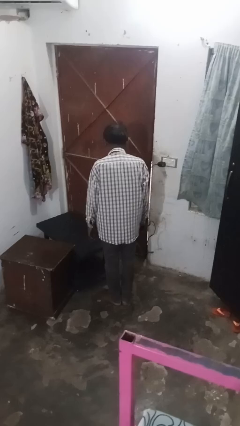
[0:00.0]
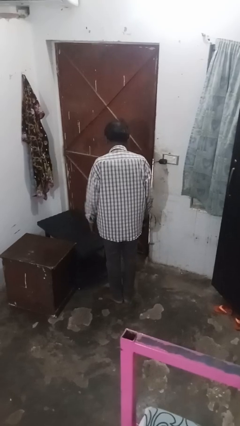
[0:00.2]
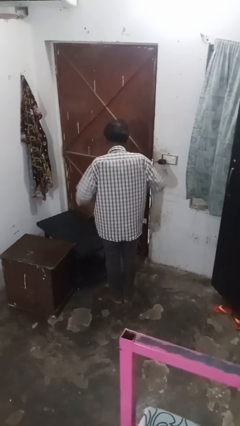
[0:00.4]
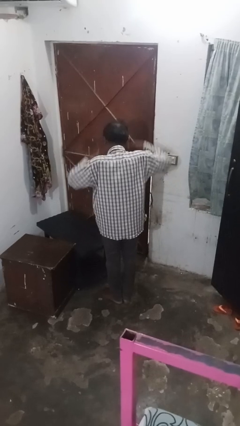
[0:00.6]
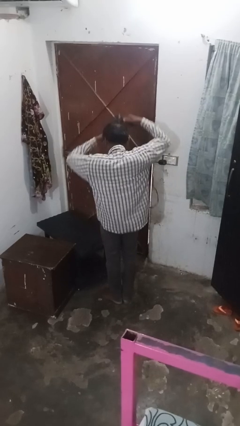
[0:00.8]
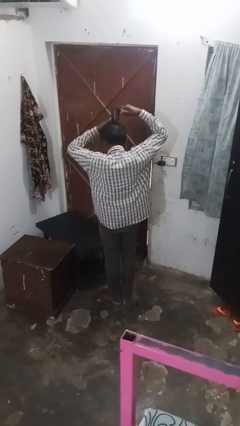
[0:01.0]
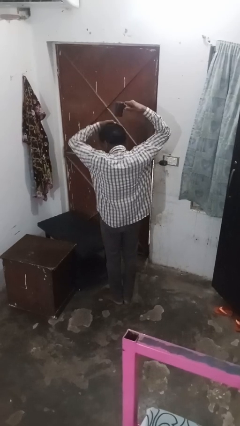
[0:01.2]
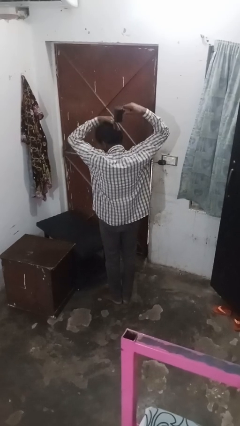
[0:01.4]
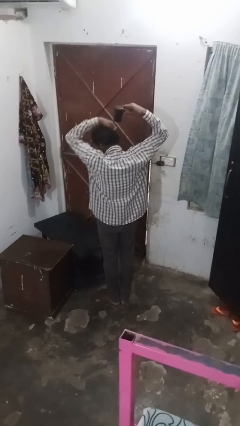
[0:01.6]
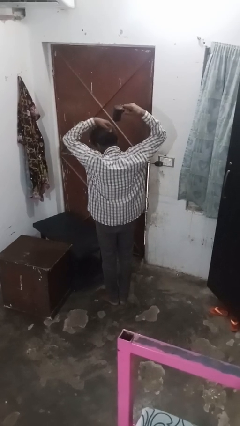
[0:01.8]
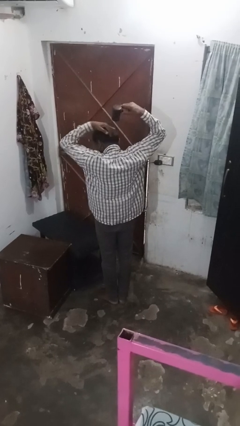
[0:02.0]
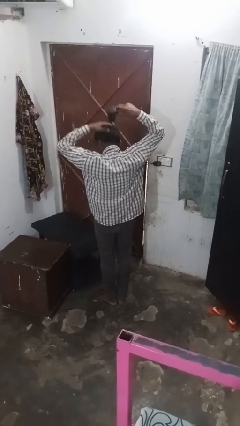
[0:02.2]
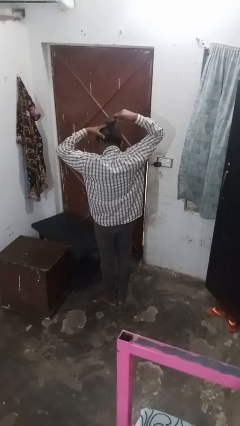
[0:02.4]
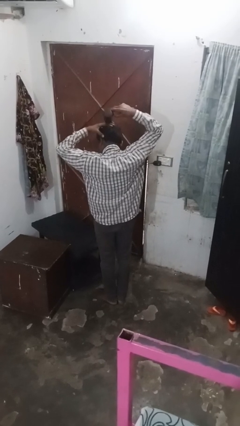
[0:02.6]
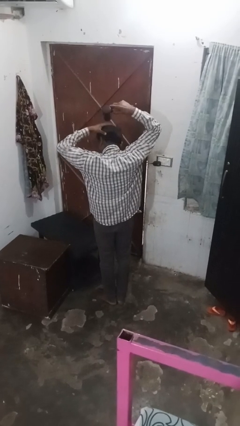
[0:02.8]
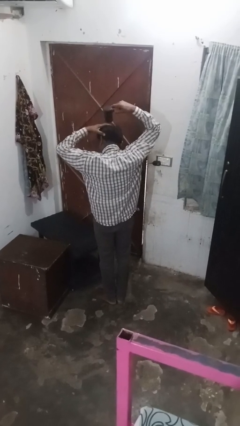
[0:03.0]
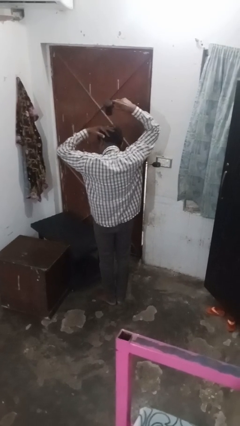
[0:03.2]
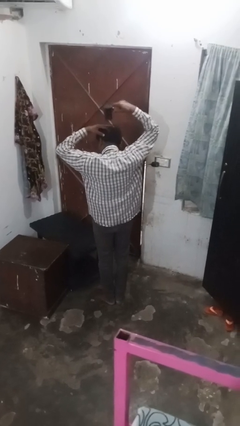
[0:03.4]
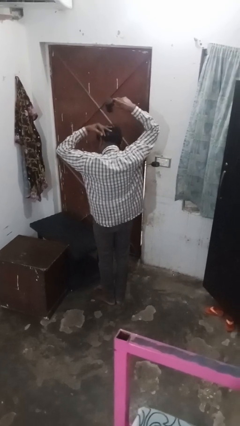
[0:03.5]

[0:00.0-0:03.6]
person dries hair with towel

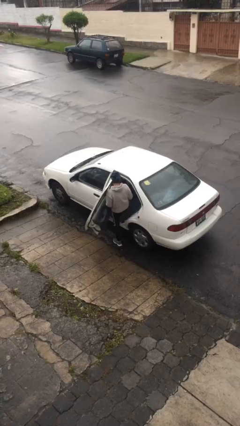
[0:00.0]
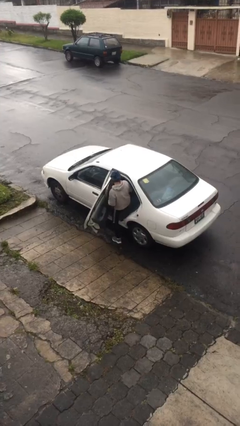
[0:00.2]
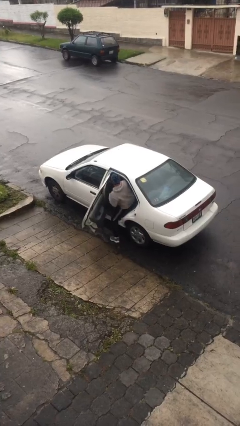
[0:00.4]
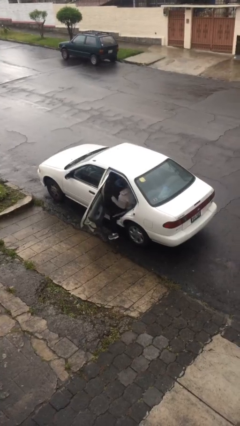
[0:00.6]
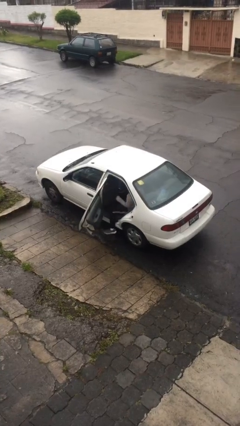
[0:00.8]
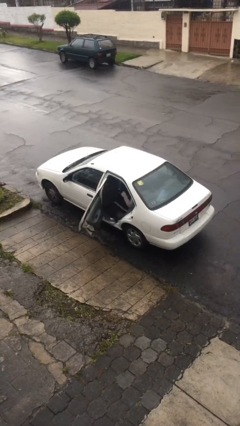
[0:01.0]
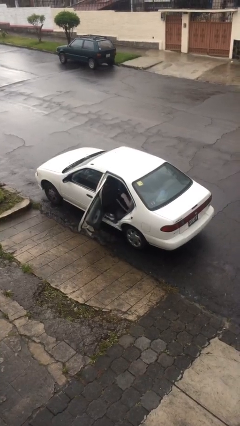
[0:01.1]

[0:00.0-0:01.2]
person enters car

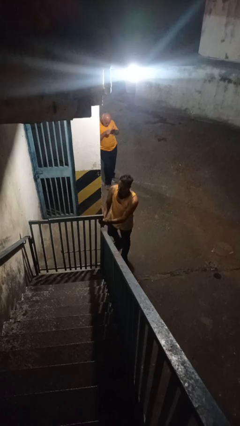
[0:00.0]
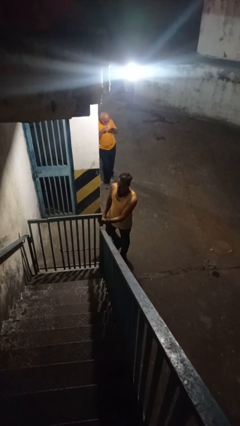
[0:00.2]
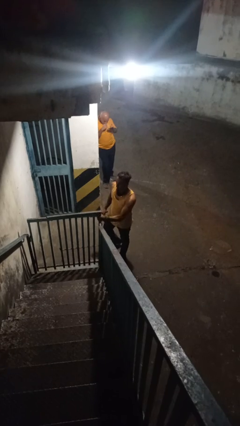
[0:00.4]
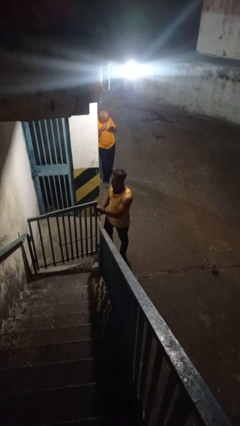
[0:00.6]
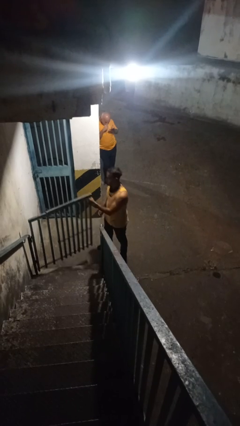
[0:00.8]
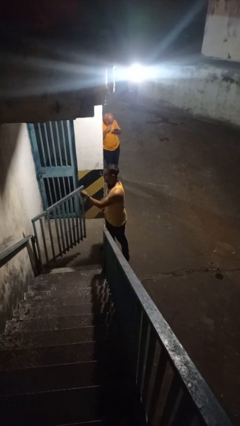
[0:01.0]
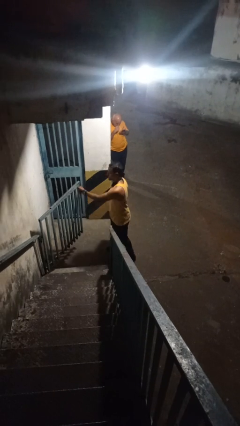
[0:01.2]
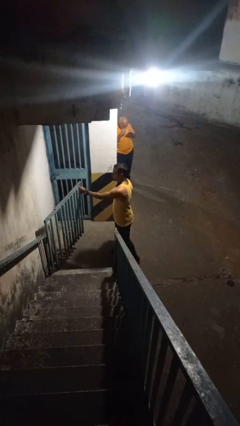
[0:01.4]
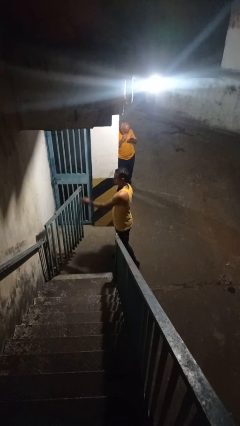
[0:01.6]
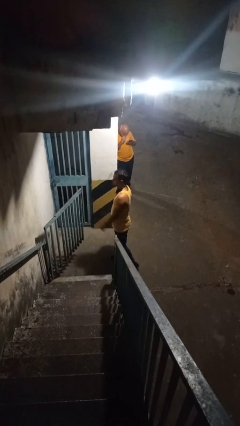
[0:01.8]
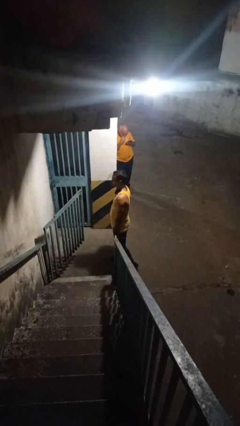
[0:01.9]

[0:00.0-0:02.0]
person opens facility door

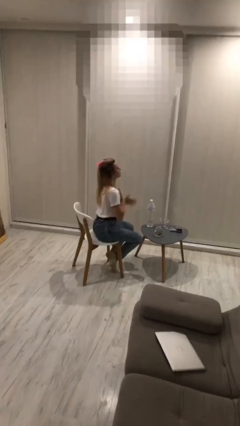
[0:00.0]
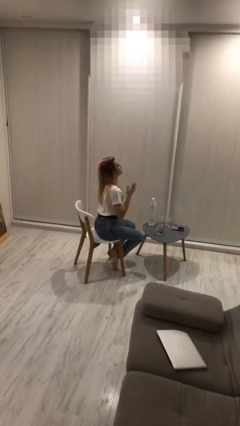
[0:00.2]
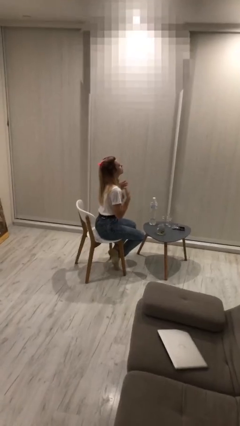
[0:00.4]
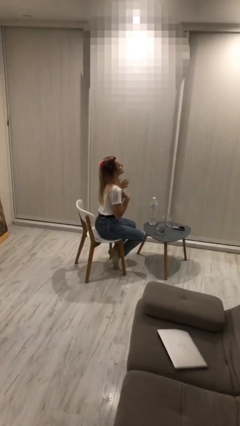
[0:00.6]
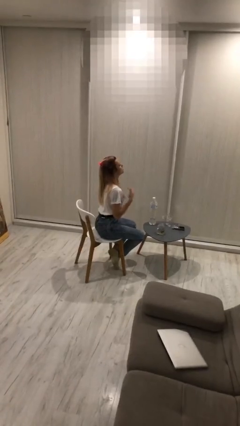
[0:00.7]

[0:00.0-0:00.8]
person drums on chest

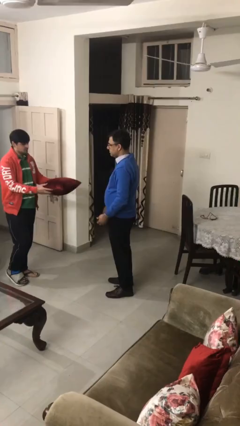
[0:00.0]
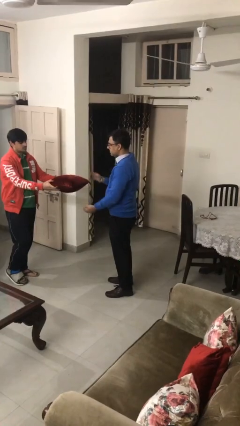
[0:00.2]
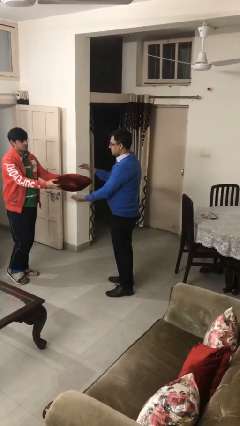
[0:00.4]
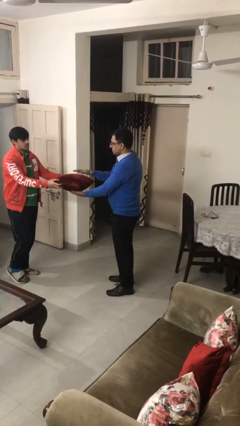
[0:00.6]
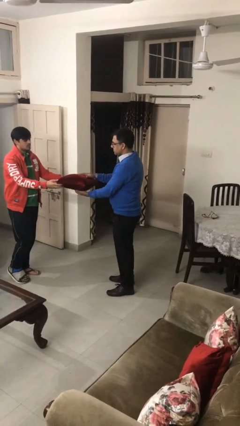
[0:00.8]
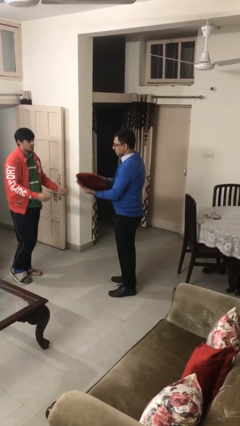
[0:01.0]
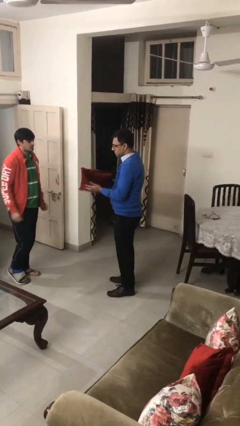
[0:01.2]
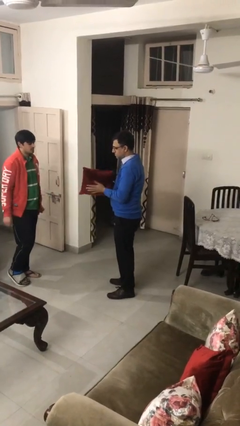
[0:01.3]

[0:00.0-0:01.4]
person transfers object to person

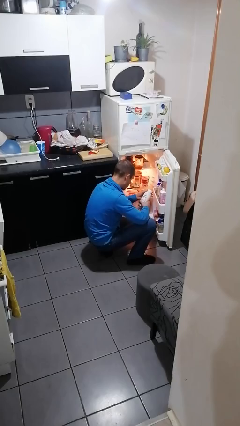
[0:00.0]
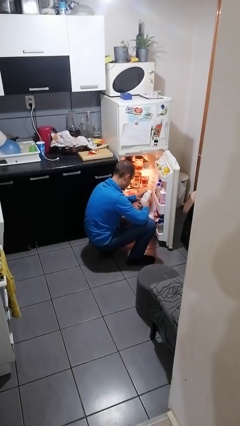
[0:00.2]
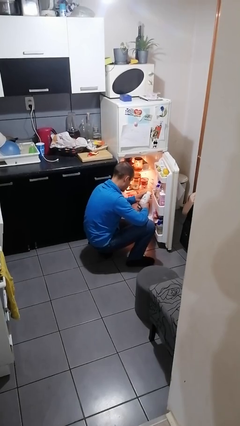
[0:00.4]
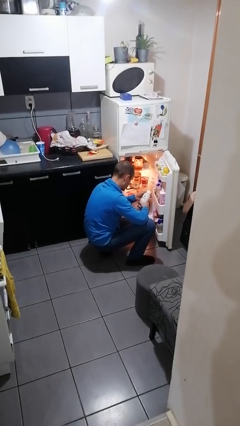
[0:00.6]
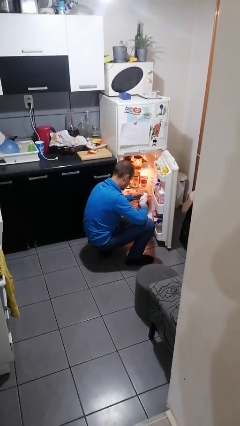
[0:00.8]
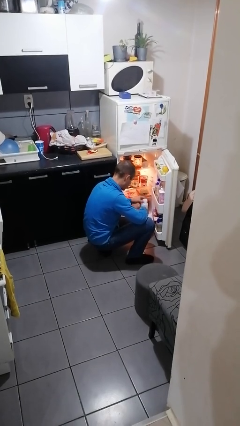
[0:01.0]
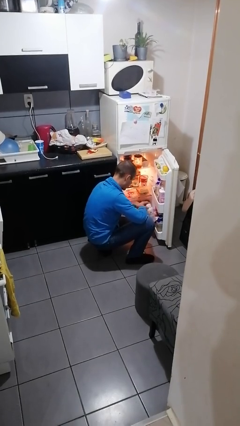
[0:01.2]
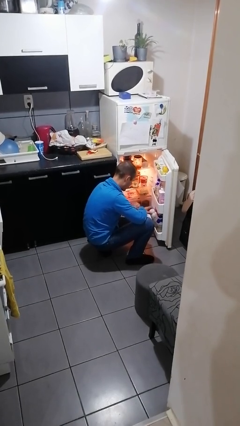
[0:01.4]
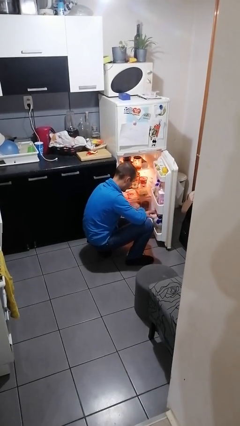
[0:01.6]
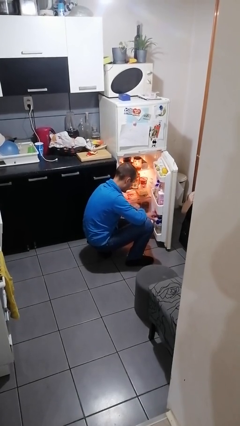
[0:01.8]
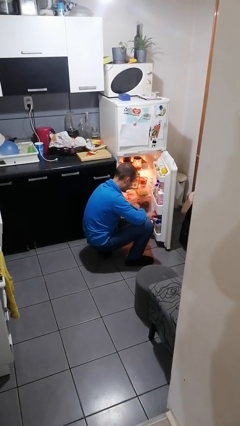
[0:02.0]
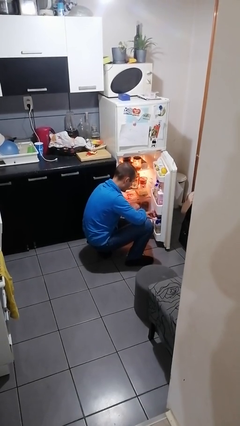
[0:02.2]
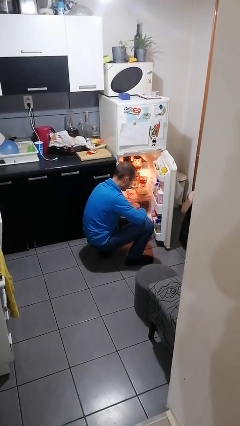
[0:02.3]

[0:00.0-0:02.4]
person puts object into refrigerator

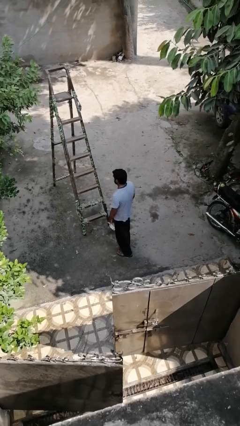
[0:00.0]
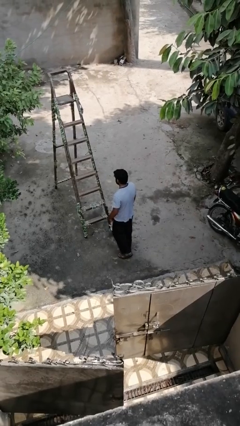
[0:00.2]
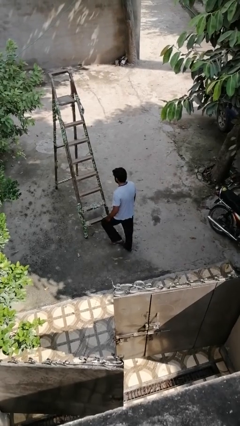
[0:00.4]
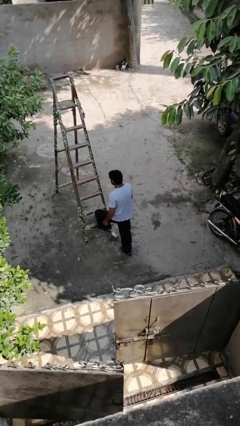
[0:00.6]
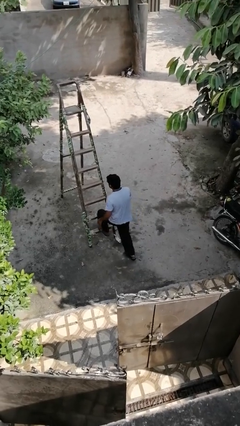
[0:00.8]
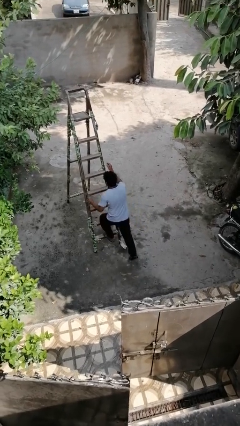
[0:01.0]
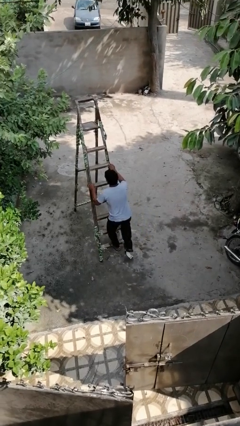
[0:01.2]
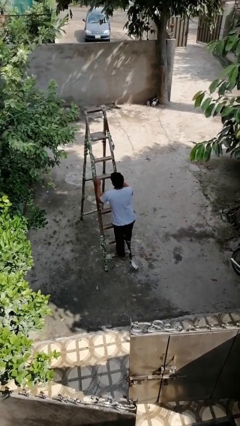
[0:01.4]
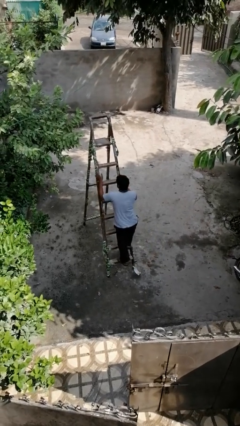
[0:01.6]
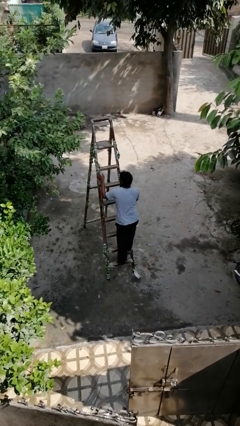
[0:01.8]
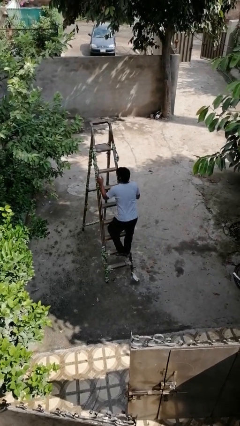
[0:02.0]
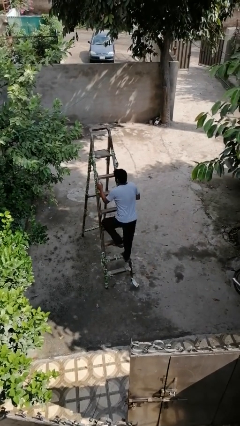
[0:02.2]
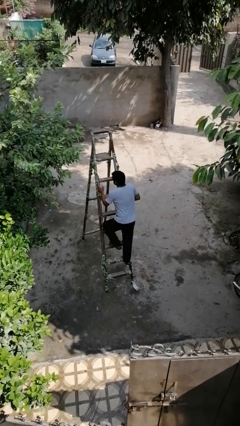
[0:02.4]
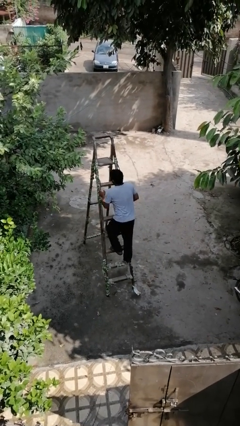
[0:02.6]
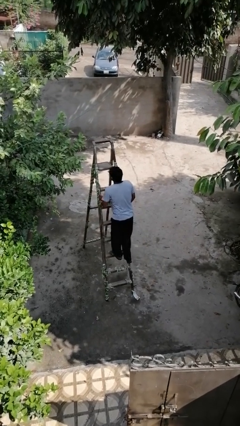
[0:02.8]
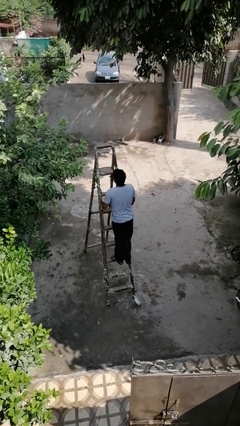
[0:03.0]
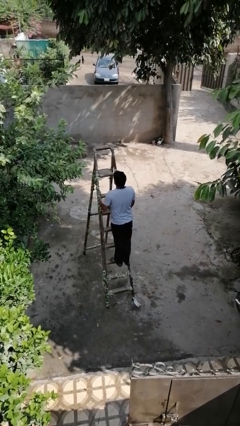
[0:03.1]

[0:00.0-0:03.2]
person climbs up ladder

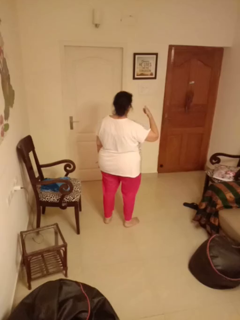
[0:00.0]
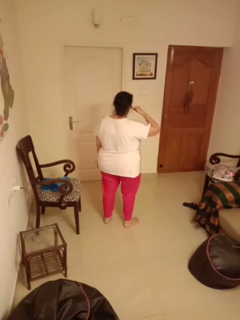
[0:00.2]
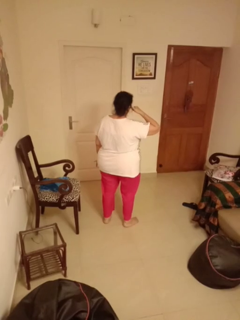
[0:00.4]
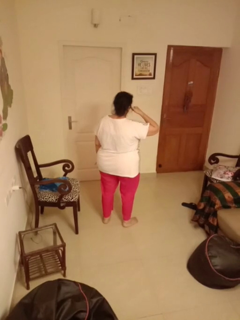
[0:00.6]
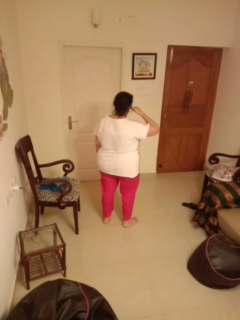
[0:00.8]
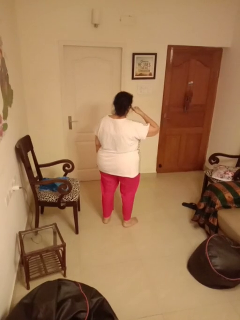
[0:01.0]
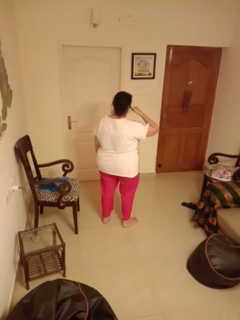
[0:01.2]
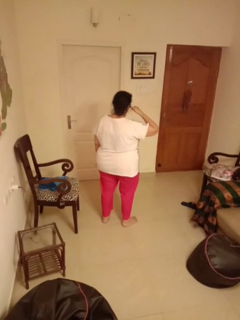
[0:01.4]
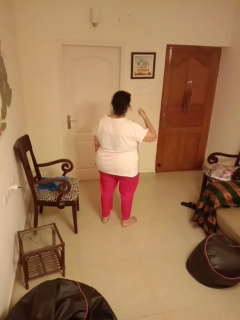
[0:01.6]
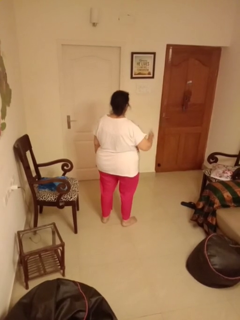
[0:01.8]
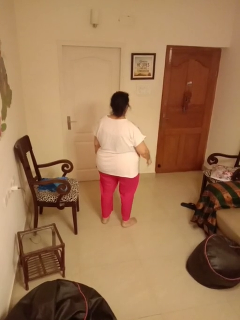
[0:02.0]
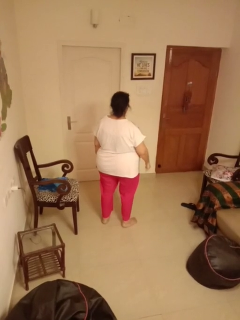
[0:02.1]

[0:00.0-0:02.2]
person gestures call me

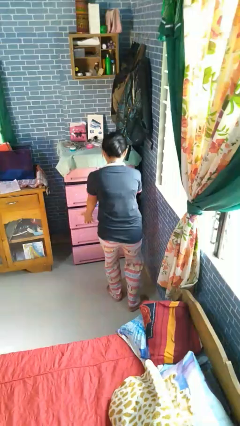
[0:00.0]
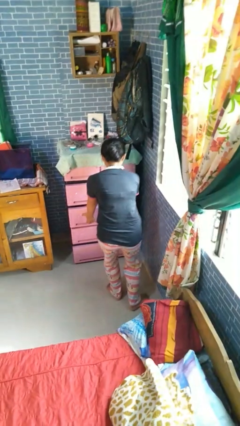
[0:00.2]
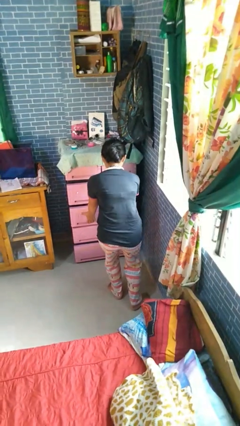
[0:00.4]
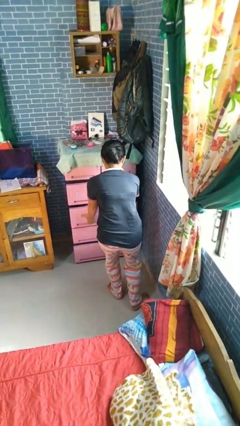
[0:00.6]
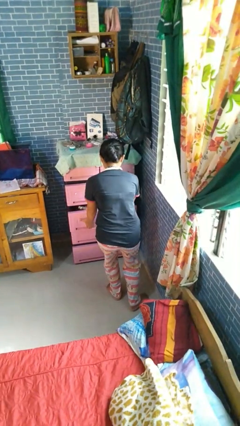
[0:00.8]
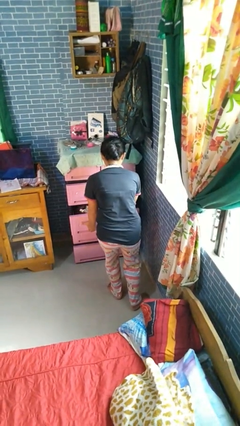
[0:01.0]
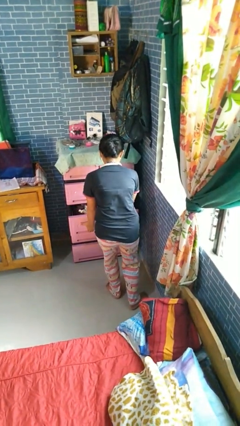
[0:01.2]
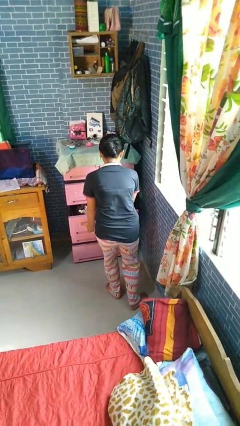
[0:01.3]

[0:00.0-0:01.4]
person opens dresser drawer
